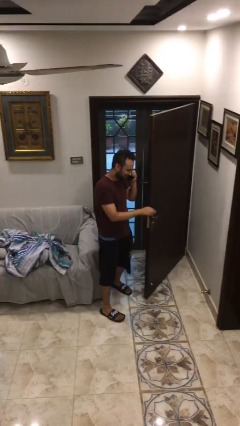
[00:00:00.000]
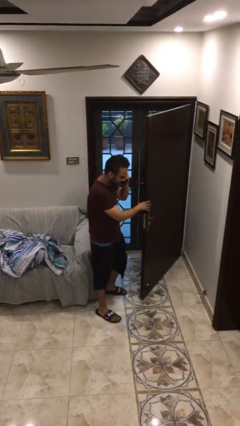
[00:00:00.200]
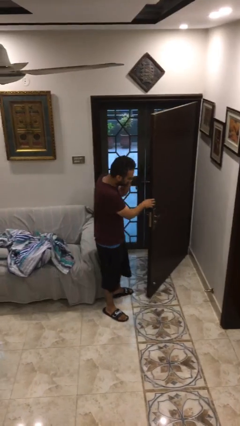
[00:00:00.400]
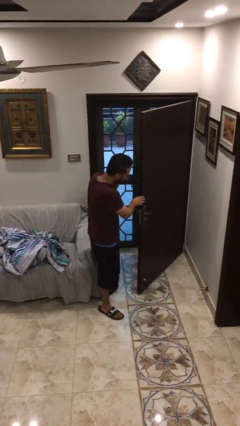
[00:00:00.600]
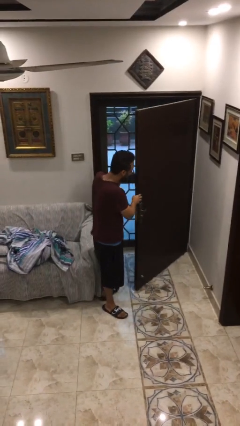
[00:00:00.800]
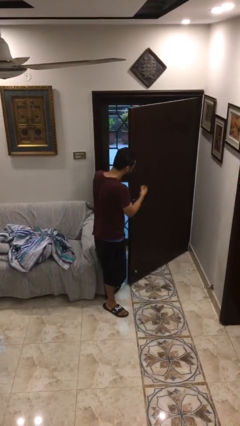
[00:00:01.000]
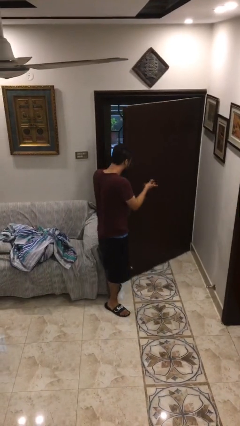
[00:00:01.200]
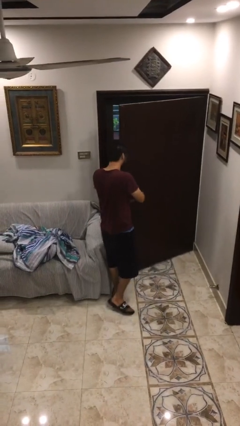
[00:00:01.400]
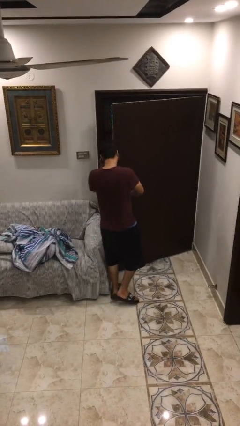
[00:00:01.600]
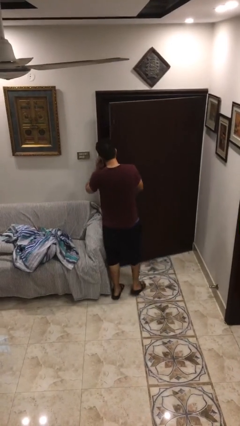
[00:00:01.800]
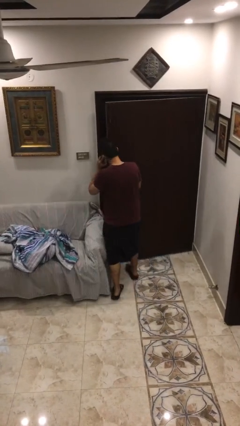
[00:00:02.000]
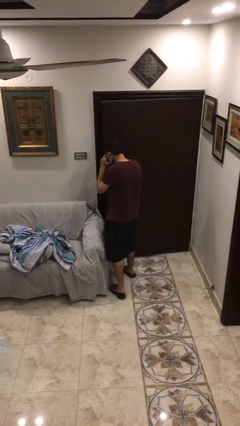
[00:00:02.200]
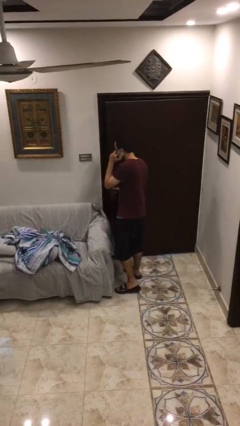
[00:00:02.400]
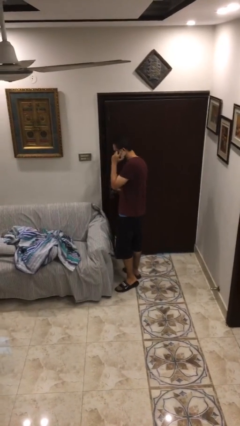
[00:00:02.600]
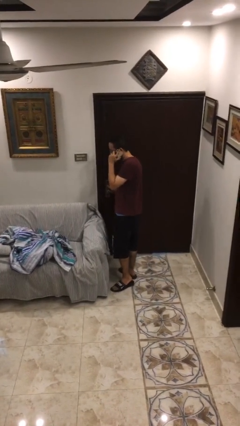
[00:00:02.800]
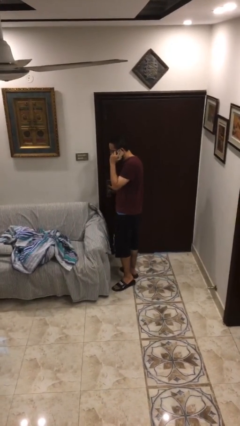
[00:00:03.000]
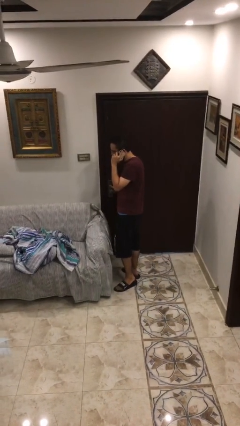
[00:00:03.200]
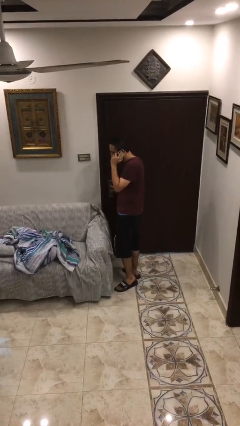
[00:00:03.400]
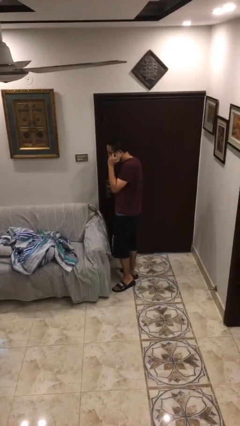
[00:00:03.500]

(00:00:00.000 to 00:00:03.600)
person closes facility door

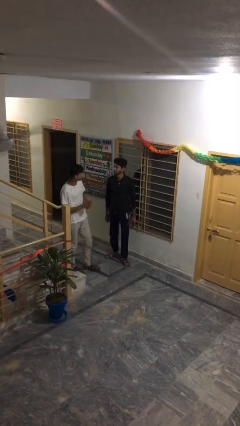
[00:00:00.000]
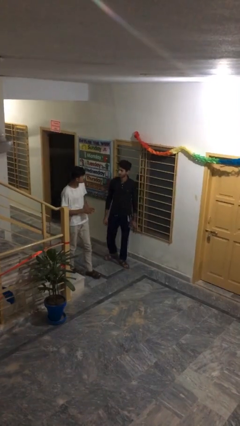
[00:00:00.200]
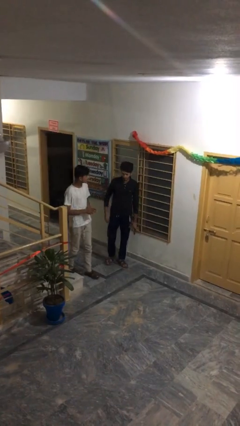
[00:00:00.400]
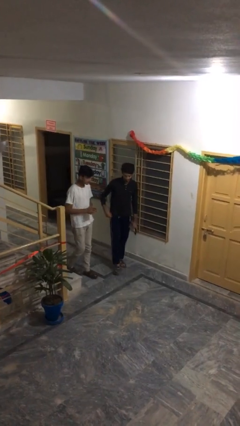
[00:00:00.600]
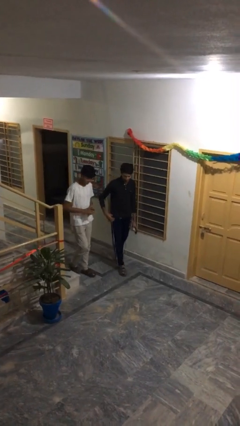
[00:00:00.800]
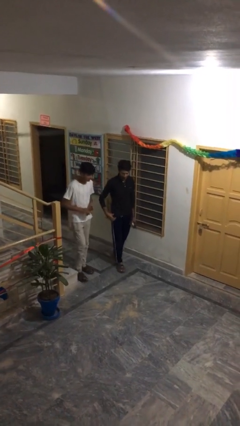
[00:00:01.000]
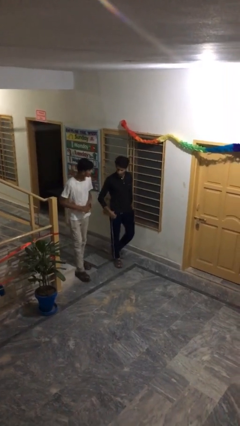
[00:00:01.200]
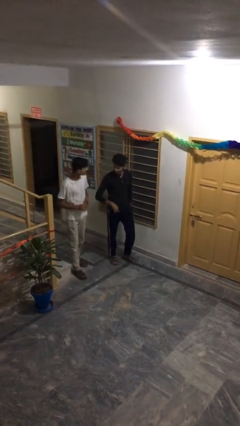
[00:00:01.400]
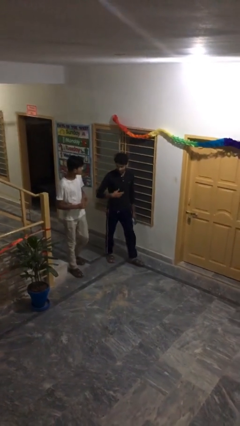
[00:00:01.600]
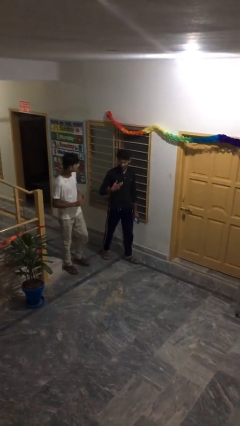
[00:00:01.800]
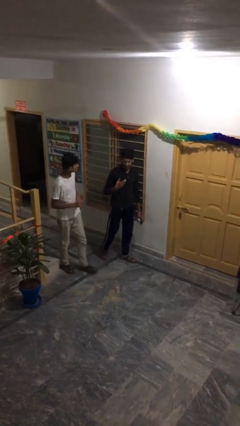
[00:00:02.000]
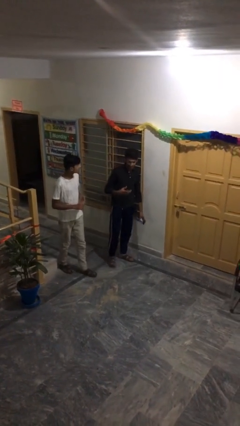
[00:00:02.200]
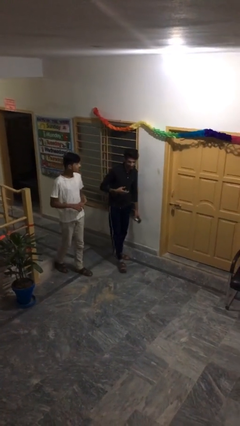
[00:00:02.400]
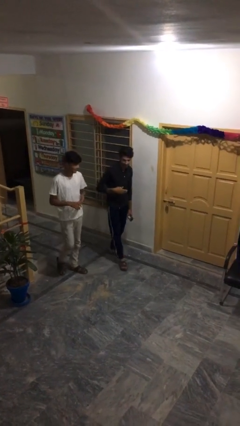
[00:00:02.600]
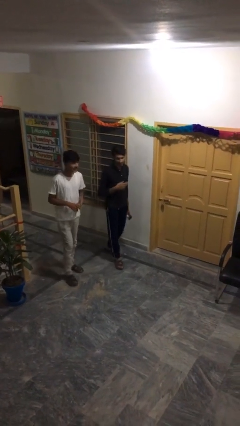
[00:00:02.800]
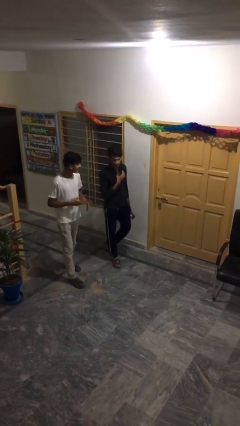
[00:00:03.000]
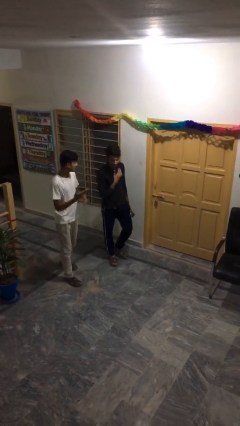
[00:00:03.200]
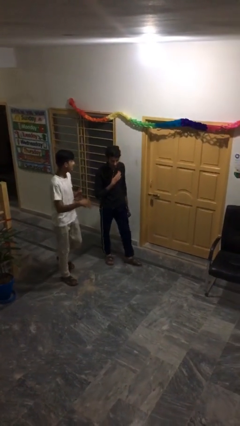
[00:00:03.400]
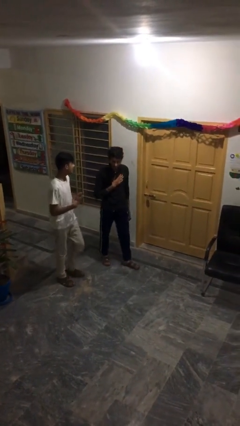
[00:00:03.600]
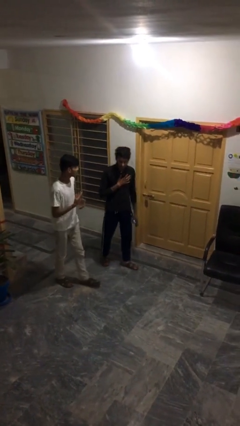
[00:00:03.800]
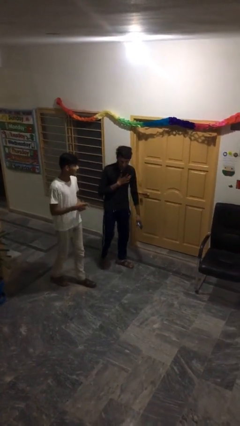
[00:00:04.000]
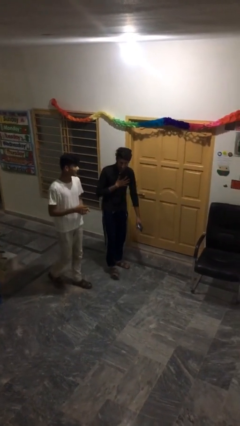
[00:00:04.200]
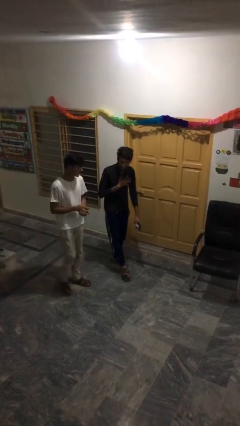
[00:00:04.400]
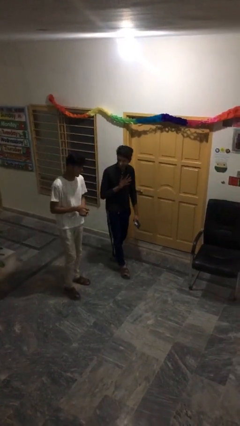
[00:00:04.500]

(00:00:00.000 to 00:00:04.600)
person talks to person

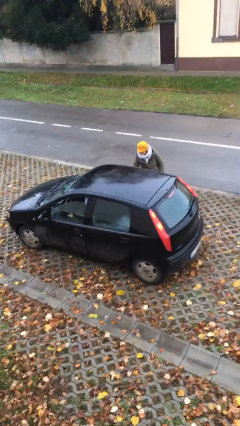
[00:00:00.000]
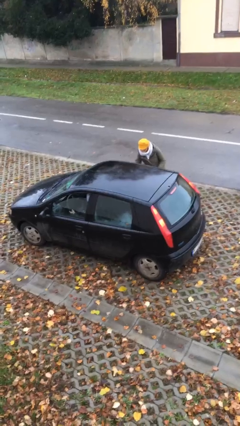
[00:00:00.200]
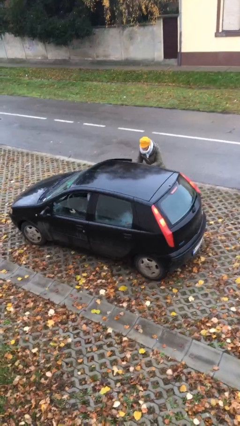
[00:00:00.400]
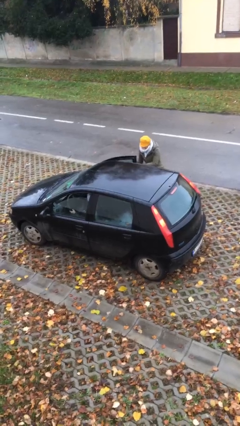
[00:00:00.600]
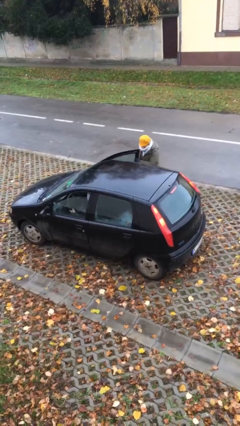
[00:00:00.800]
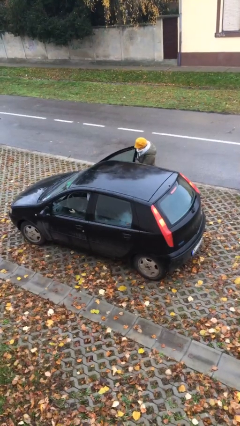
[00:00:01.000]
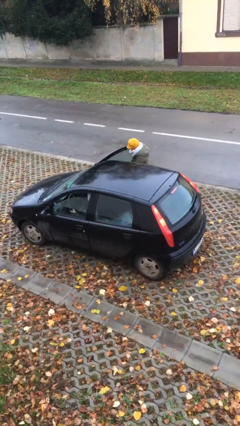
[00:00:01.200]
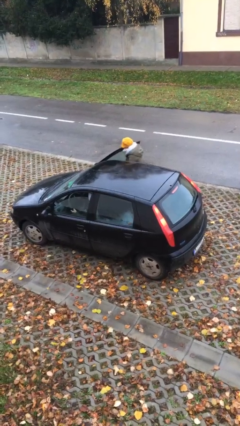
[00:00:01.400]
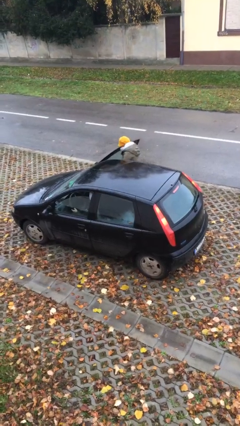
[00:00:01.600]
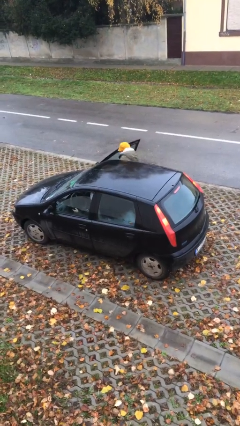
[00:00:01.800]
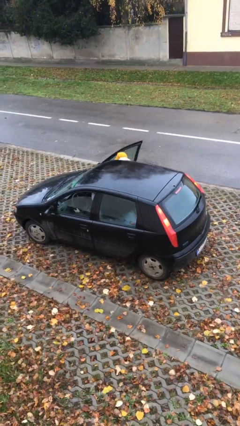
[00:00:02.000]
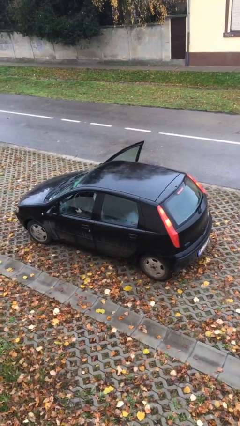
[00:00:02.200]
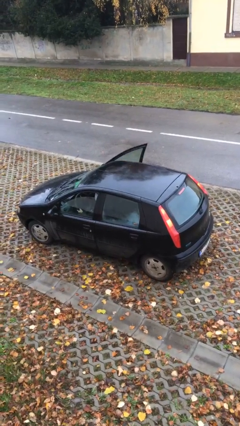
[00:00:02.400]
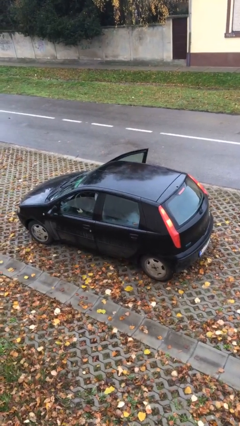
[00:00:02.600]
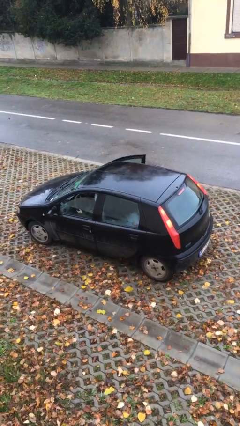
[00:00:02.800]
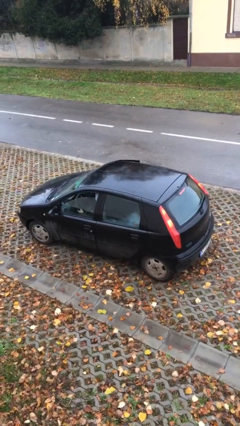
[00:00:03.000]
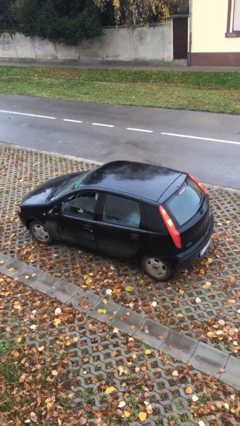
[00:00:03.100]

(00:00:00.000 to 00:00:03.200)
car picks up person

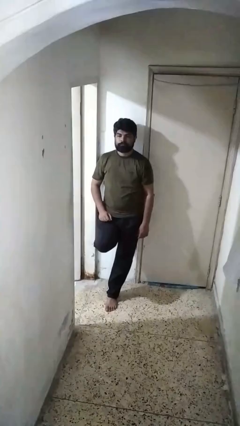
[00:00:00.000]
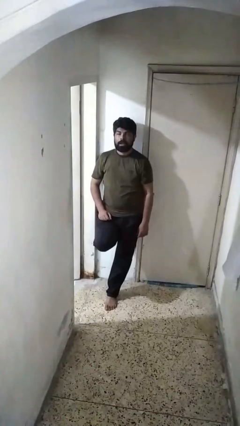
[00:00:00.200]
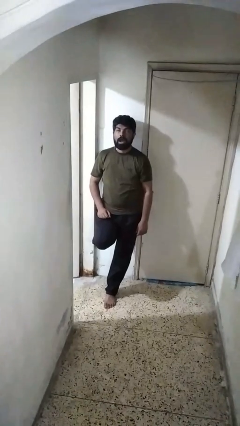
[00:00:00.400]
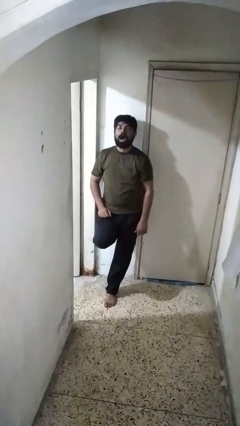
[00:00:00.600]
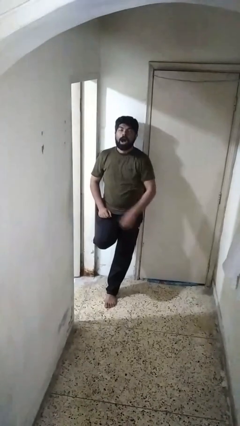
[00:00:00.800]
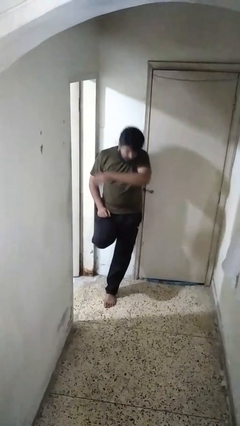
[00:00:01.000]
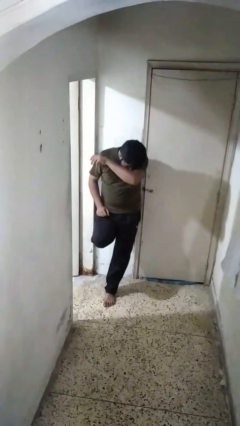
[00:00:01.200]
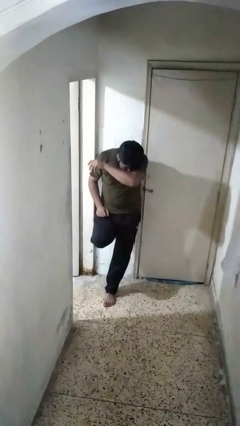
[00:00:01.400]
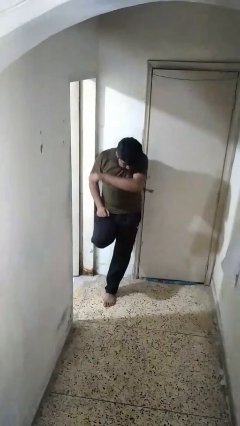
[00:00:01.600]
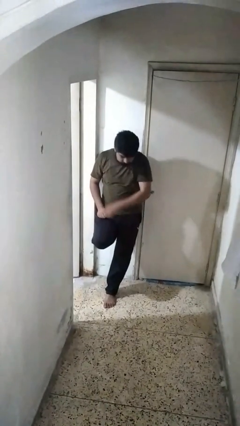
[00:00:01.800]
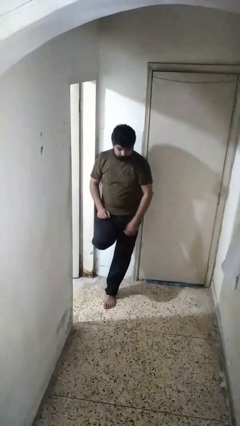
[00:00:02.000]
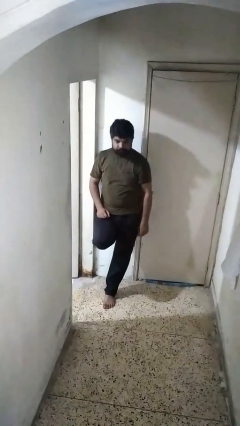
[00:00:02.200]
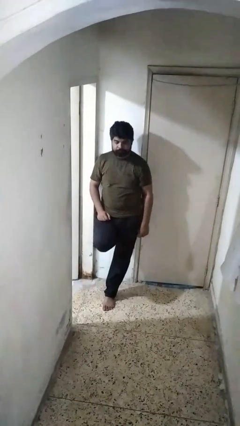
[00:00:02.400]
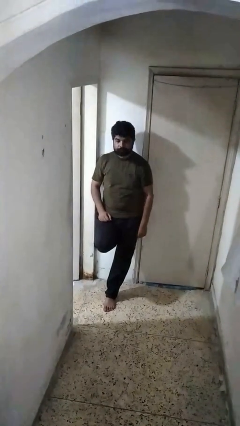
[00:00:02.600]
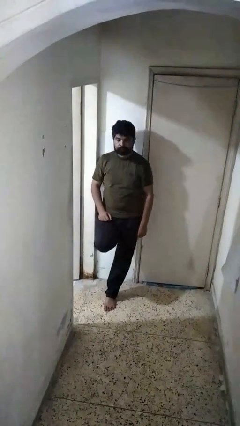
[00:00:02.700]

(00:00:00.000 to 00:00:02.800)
person sneezes into arm

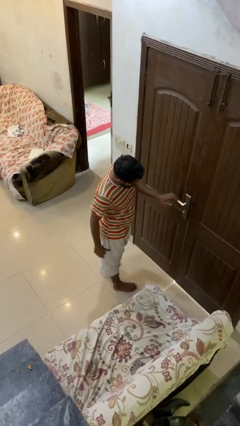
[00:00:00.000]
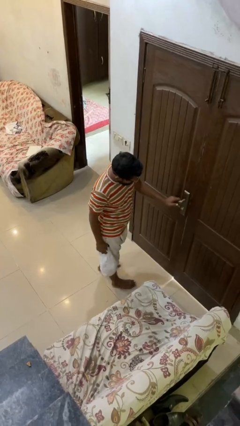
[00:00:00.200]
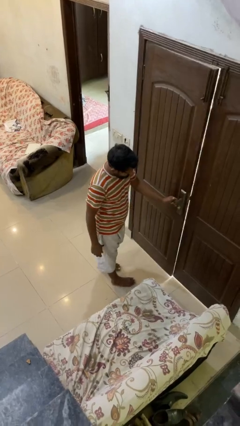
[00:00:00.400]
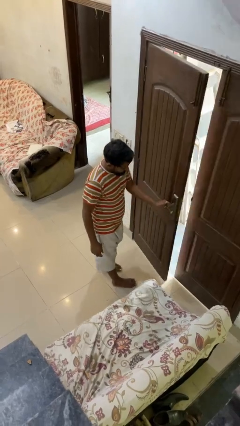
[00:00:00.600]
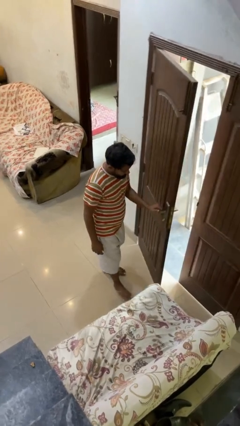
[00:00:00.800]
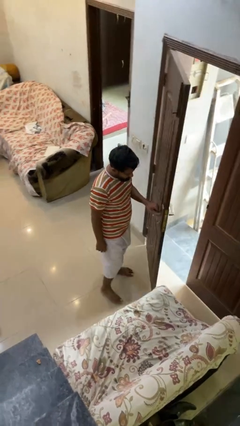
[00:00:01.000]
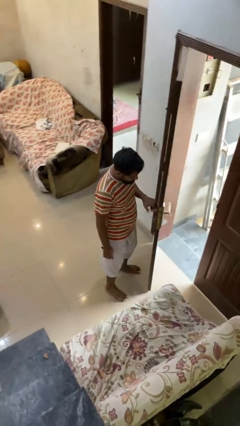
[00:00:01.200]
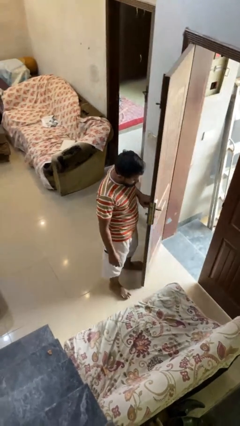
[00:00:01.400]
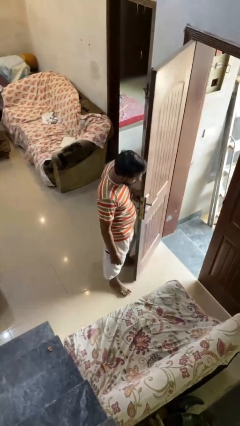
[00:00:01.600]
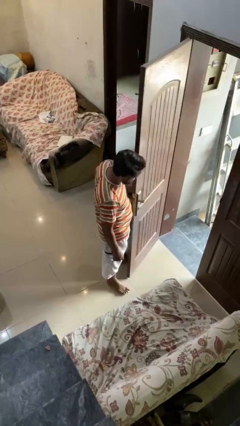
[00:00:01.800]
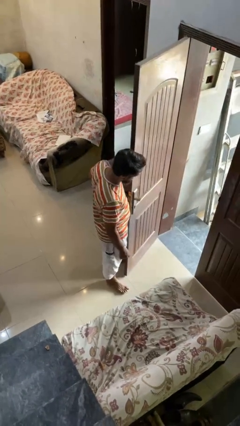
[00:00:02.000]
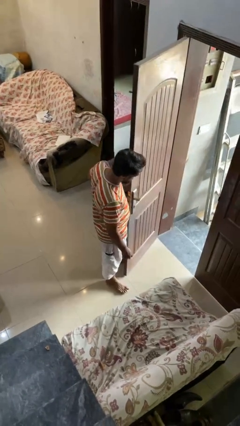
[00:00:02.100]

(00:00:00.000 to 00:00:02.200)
person opens facility door

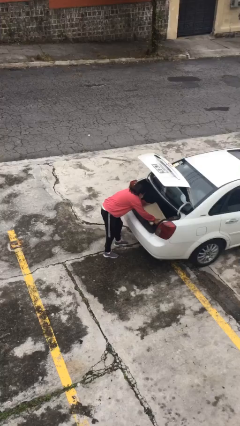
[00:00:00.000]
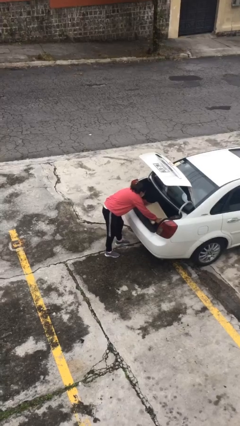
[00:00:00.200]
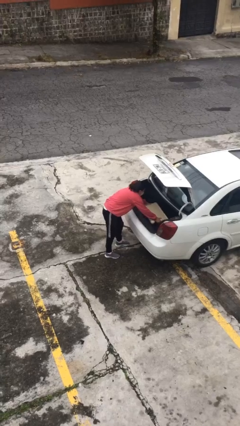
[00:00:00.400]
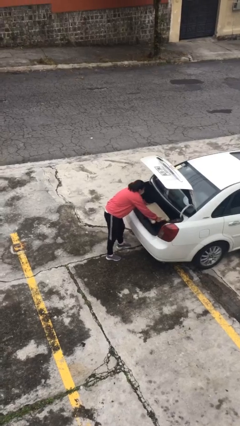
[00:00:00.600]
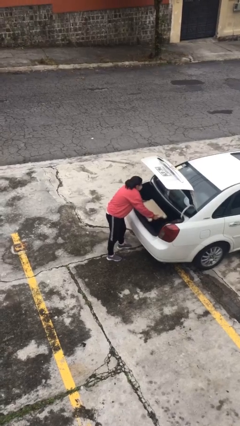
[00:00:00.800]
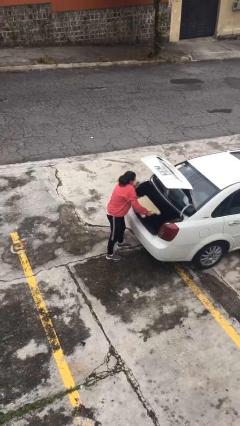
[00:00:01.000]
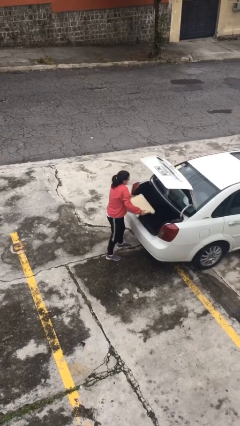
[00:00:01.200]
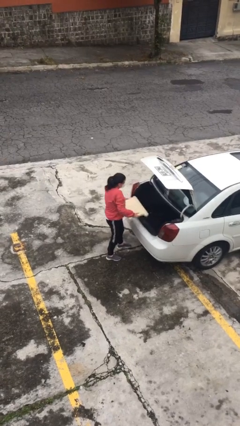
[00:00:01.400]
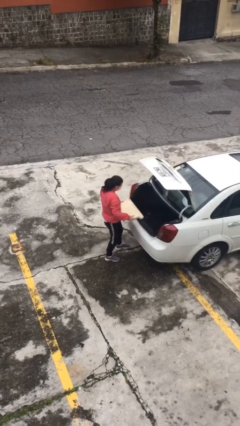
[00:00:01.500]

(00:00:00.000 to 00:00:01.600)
person unloads car
